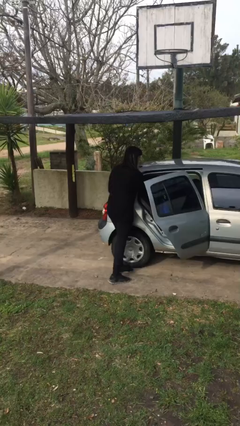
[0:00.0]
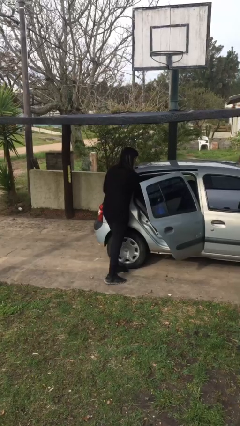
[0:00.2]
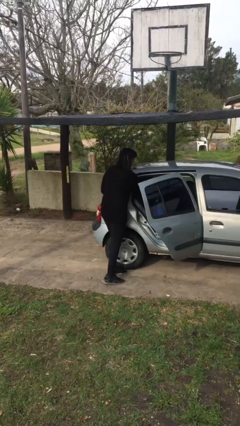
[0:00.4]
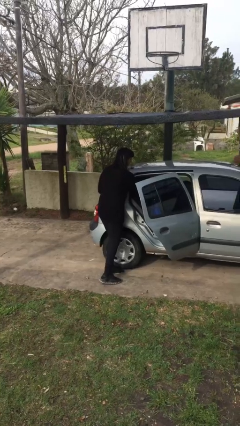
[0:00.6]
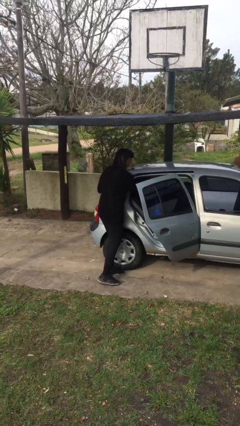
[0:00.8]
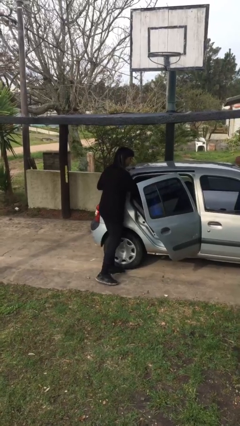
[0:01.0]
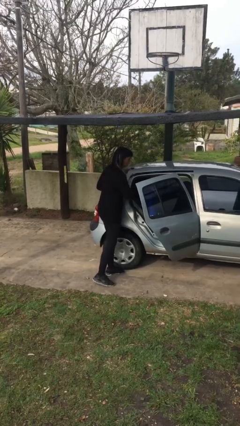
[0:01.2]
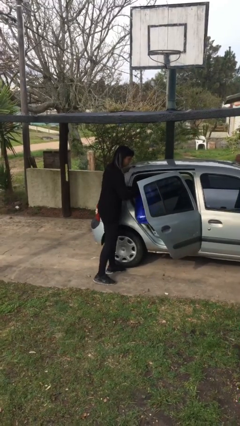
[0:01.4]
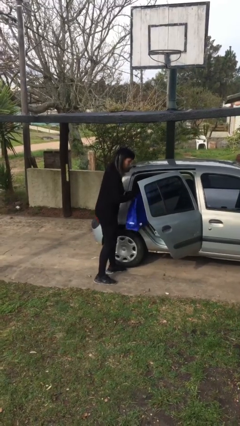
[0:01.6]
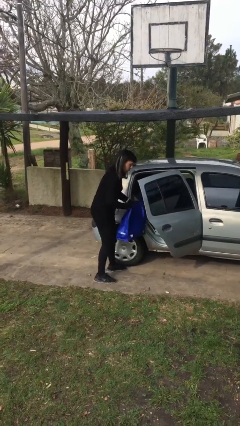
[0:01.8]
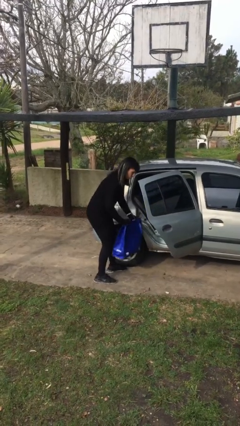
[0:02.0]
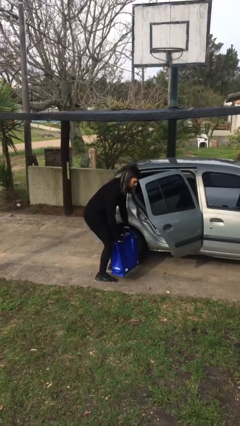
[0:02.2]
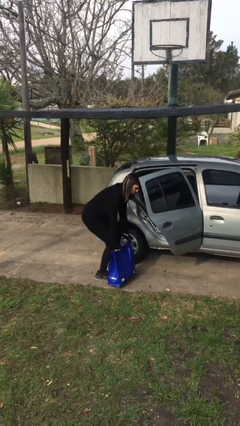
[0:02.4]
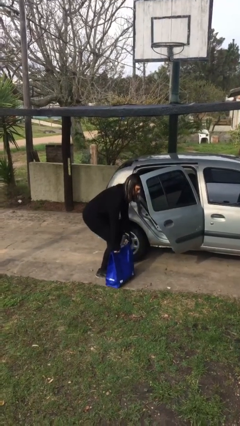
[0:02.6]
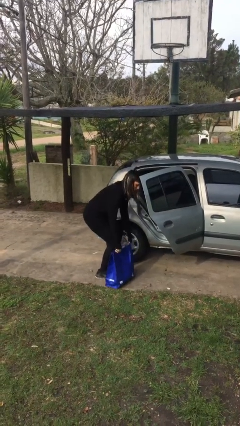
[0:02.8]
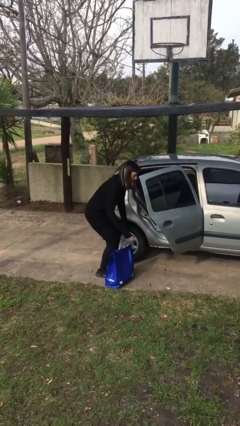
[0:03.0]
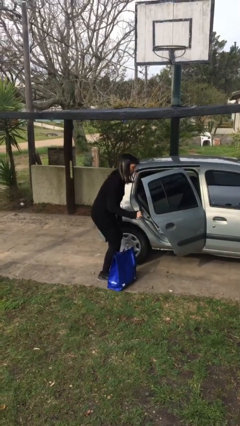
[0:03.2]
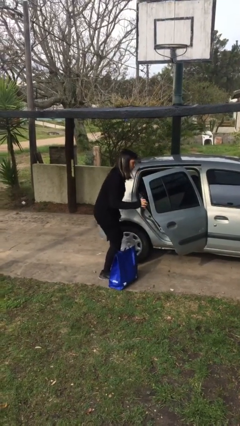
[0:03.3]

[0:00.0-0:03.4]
person unloads car

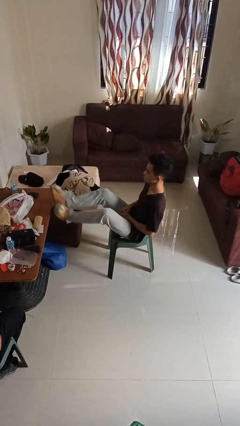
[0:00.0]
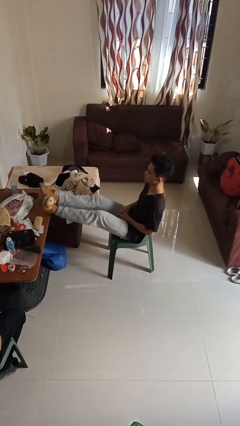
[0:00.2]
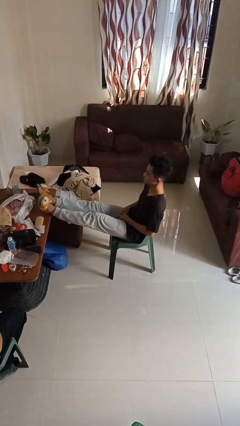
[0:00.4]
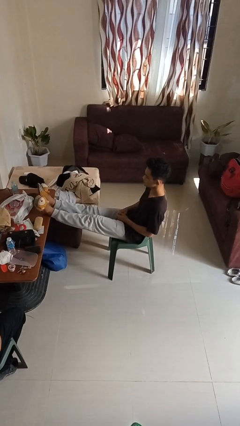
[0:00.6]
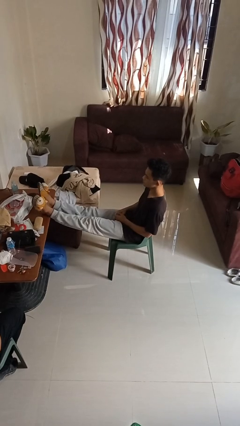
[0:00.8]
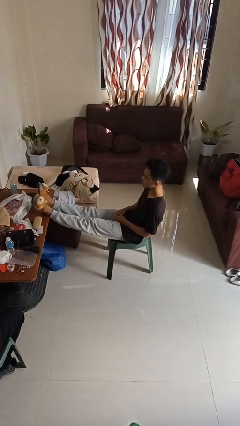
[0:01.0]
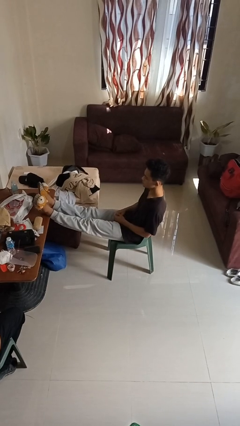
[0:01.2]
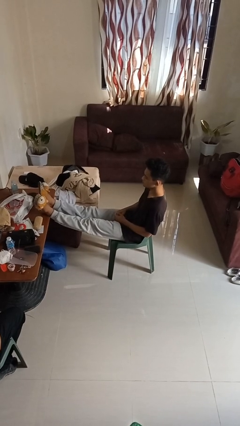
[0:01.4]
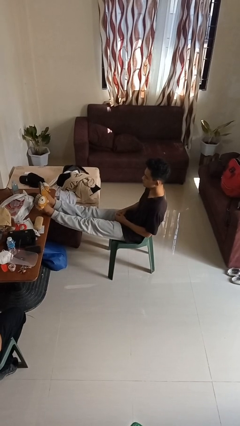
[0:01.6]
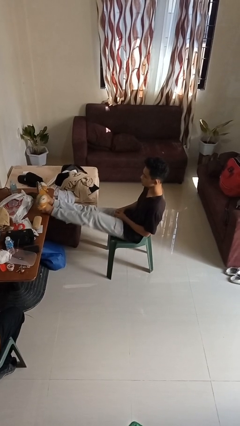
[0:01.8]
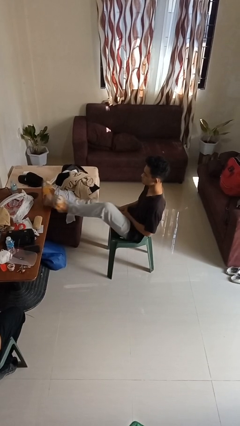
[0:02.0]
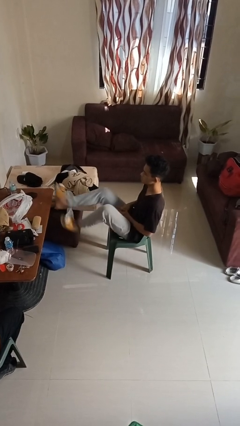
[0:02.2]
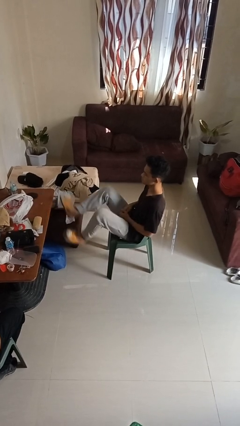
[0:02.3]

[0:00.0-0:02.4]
person puts feet up

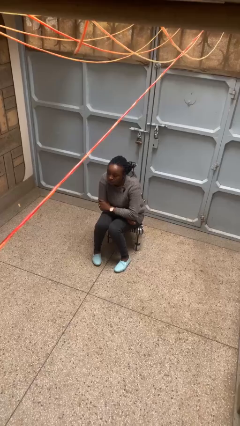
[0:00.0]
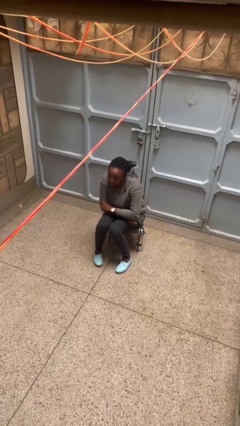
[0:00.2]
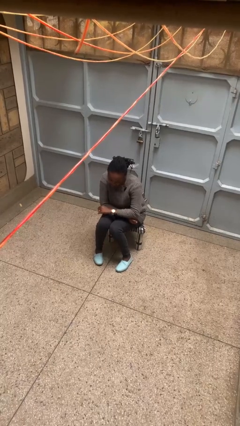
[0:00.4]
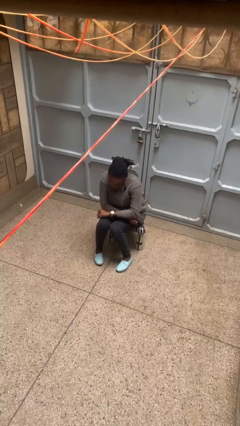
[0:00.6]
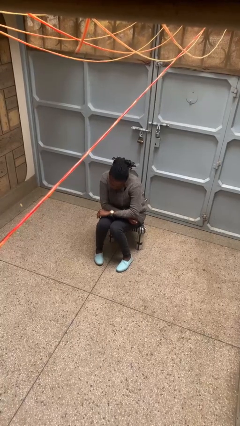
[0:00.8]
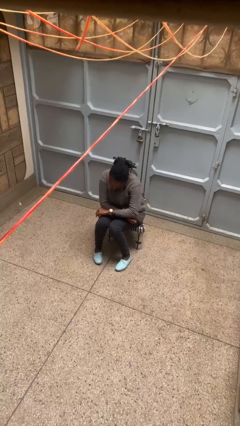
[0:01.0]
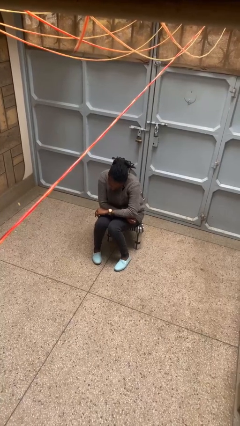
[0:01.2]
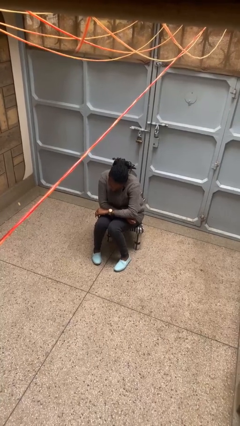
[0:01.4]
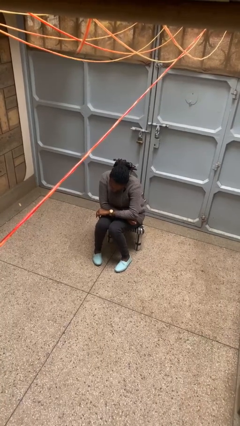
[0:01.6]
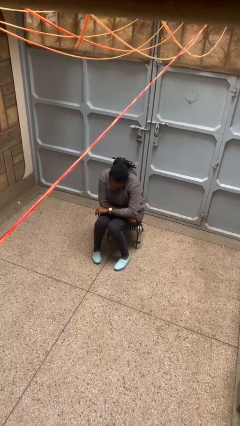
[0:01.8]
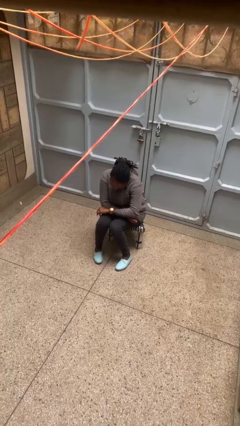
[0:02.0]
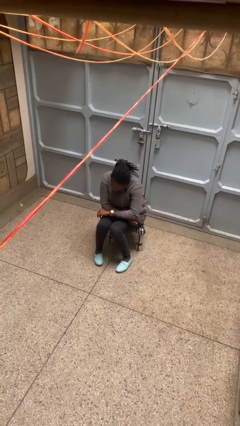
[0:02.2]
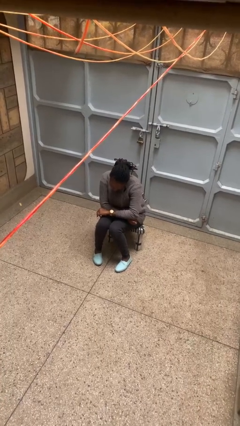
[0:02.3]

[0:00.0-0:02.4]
person looks at wristwatch

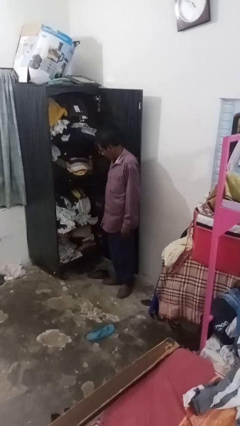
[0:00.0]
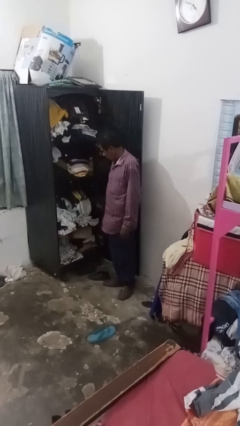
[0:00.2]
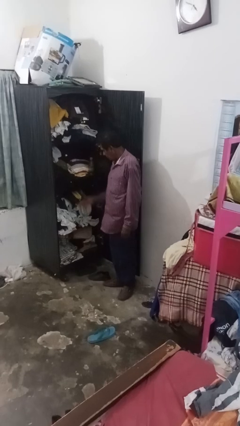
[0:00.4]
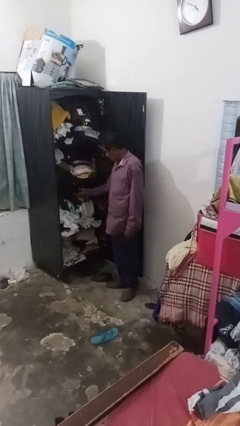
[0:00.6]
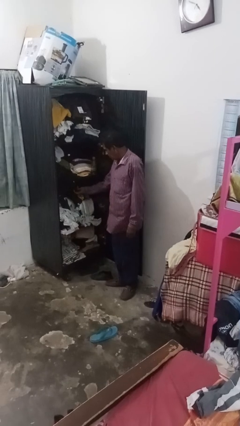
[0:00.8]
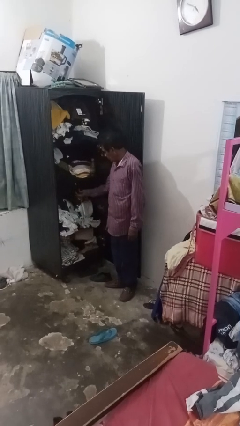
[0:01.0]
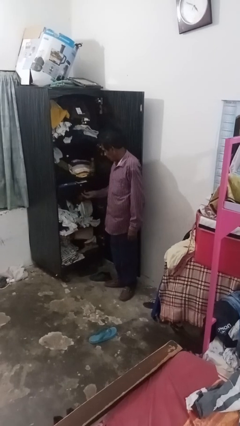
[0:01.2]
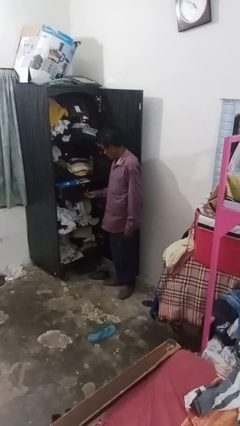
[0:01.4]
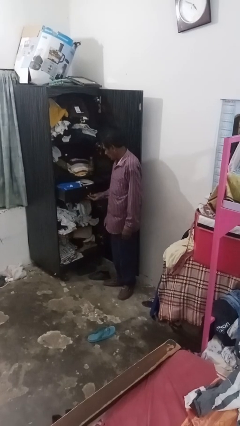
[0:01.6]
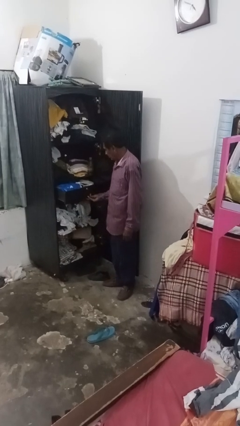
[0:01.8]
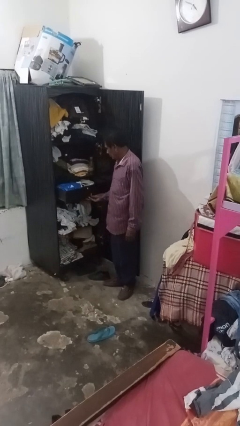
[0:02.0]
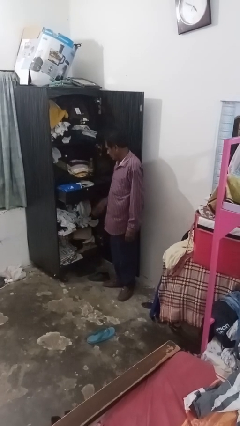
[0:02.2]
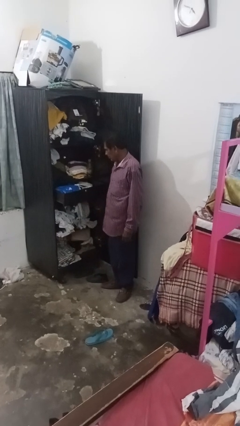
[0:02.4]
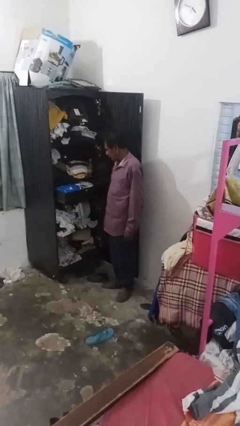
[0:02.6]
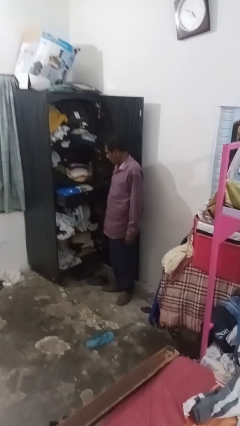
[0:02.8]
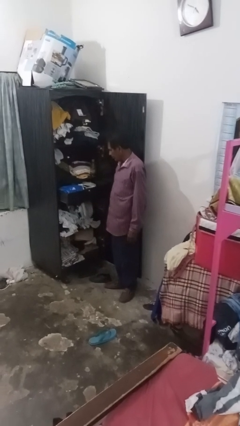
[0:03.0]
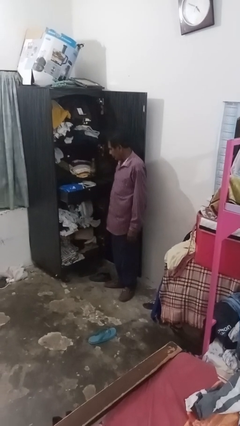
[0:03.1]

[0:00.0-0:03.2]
person opens dresser drawer

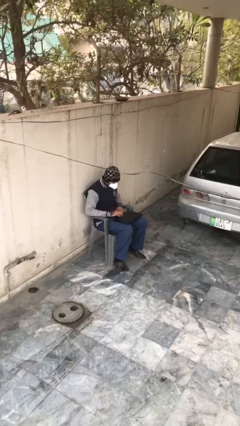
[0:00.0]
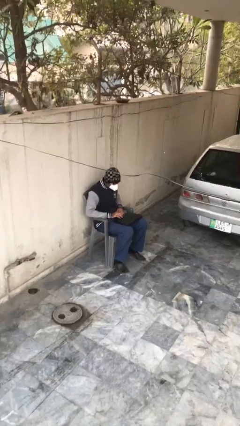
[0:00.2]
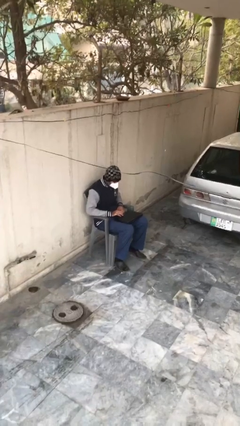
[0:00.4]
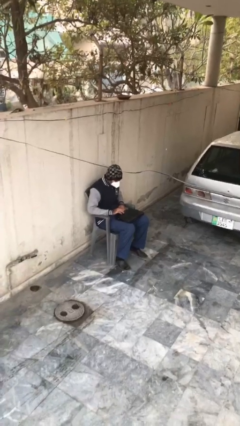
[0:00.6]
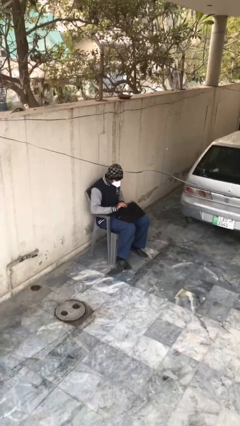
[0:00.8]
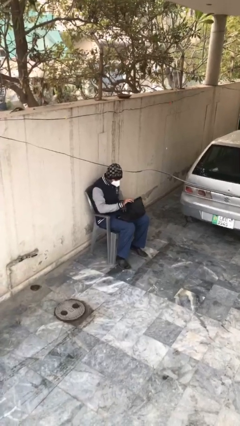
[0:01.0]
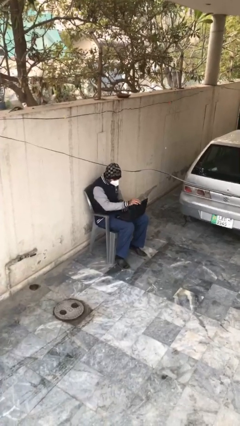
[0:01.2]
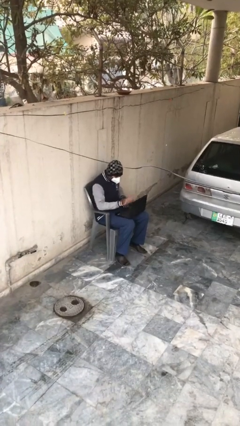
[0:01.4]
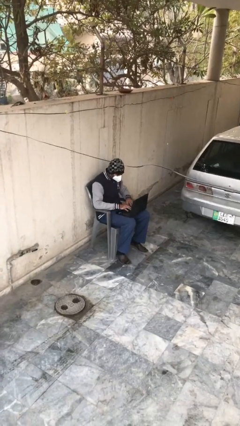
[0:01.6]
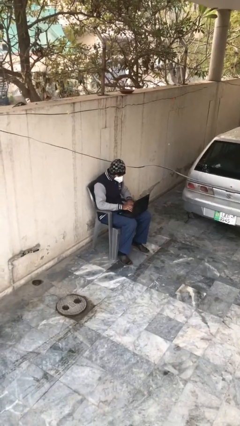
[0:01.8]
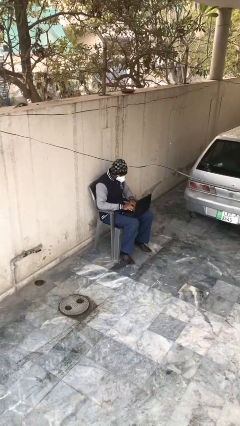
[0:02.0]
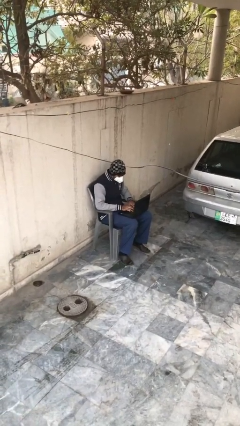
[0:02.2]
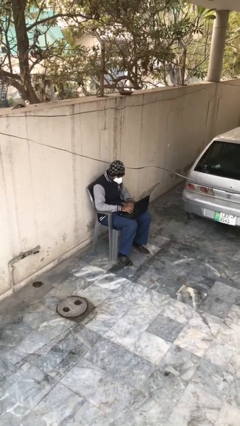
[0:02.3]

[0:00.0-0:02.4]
person interacts with laptop

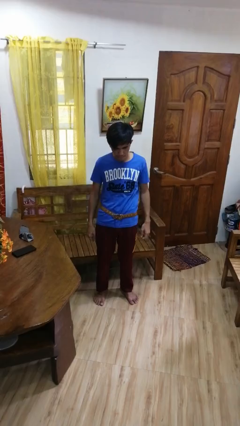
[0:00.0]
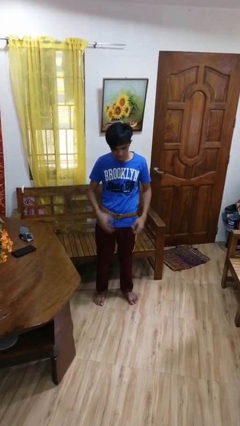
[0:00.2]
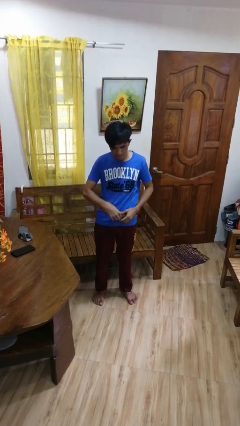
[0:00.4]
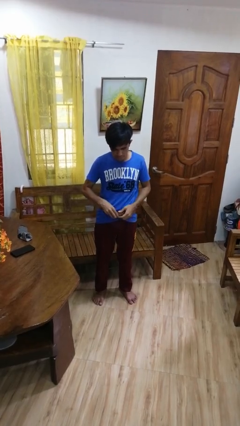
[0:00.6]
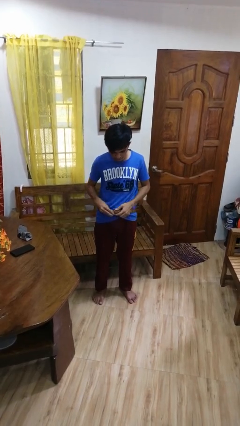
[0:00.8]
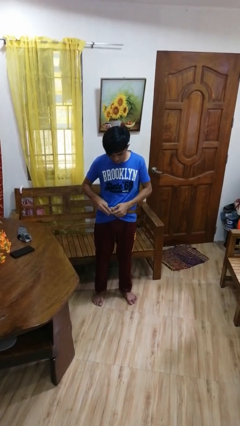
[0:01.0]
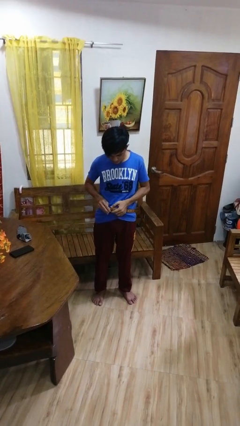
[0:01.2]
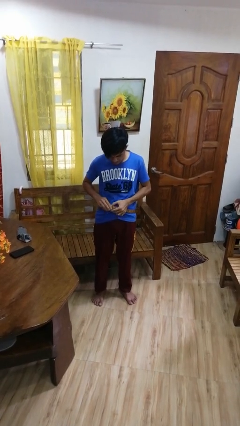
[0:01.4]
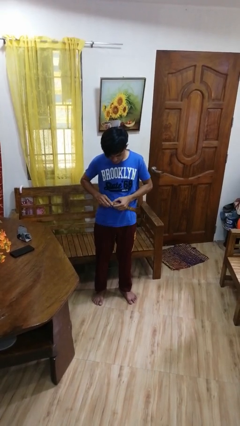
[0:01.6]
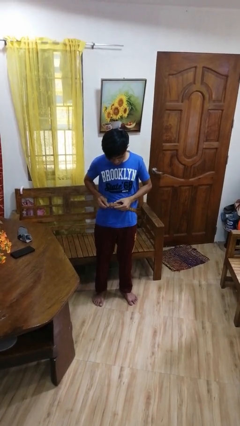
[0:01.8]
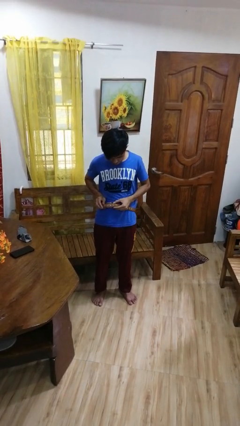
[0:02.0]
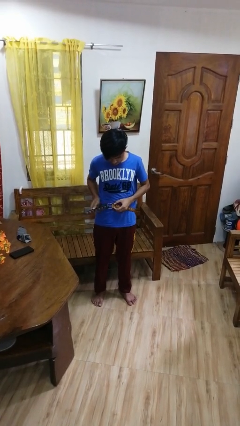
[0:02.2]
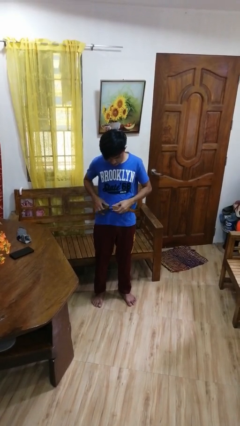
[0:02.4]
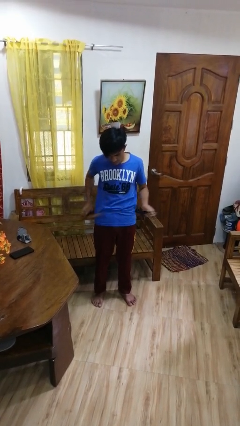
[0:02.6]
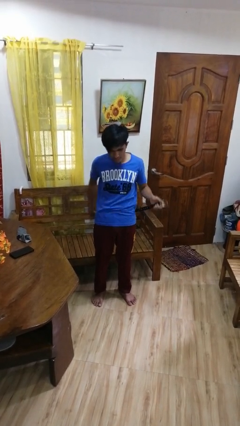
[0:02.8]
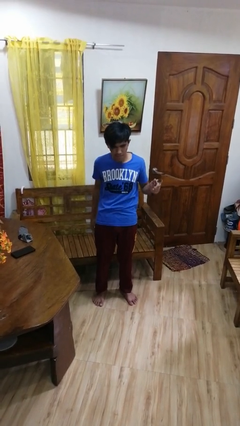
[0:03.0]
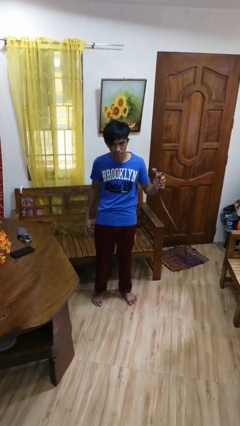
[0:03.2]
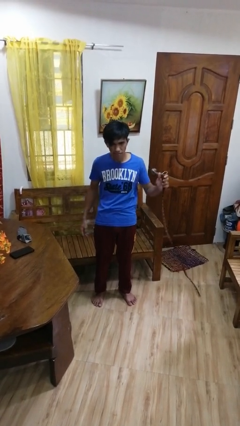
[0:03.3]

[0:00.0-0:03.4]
person takes off belt
